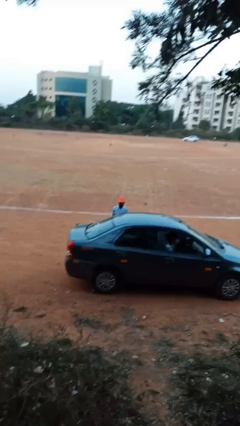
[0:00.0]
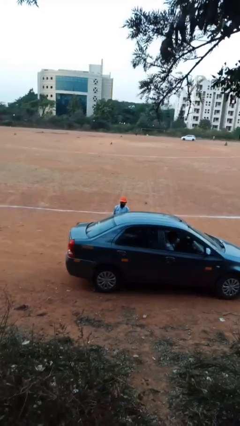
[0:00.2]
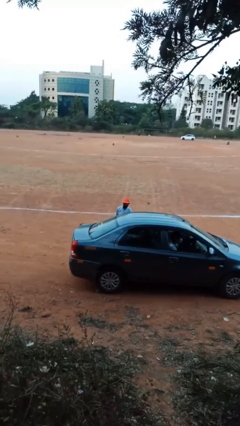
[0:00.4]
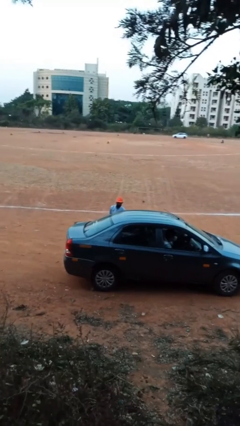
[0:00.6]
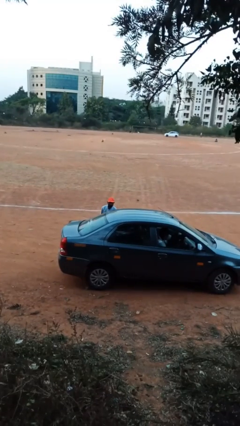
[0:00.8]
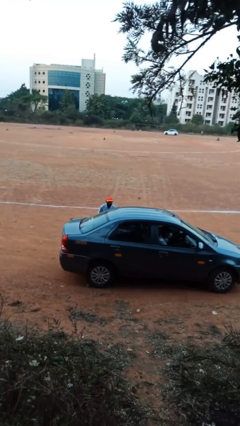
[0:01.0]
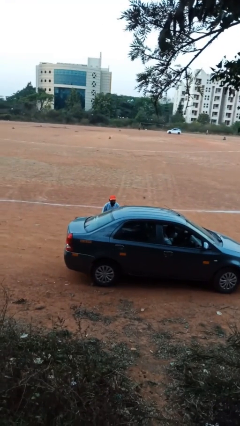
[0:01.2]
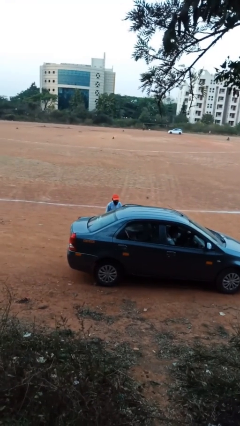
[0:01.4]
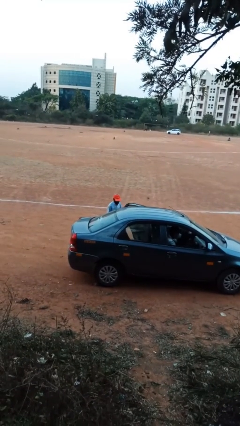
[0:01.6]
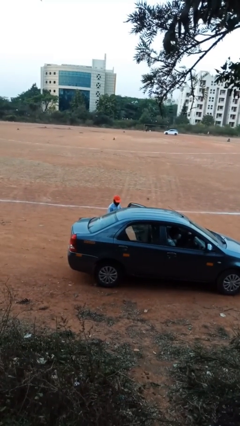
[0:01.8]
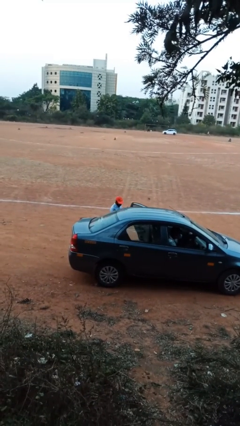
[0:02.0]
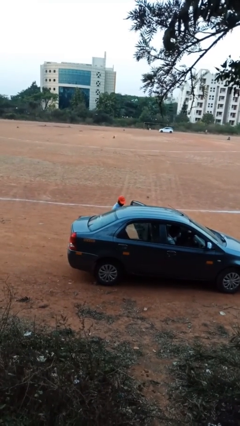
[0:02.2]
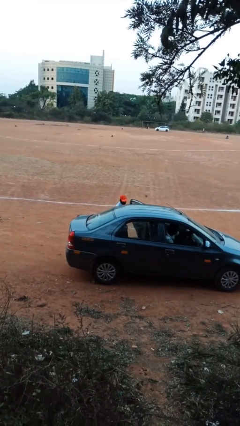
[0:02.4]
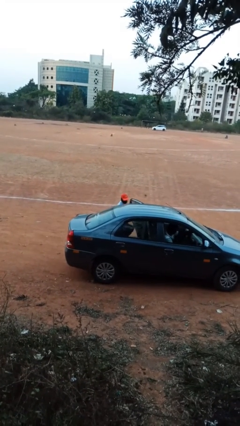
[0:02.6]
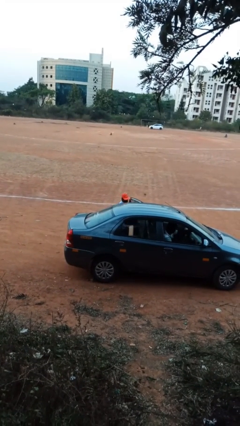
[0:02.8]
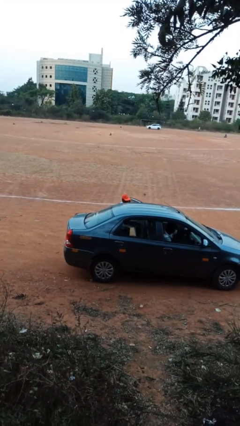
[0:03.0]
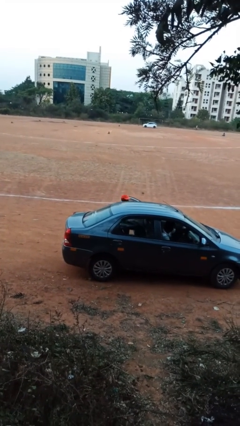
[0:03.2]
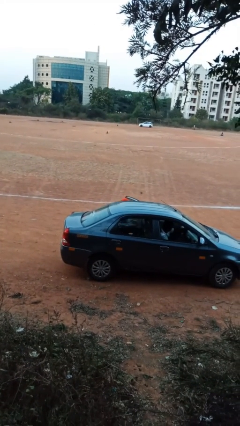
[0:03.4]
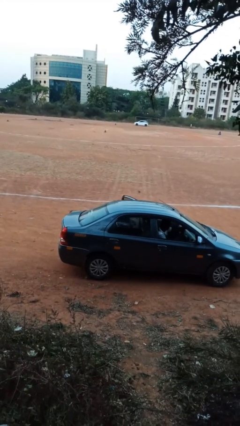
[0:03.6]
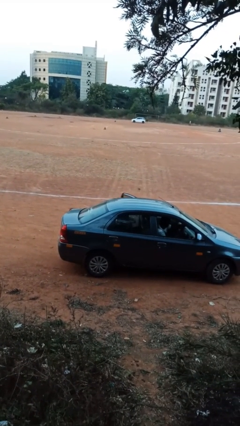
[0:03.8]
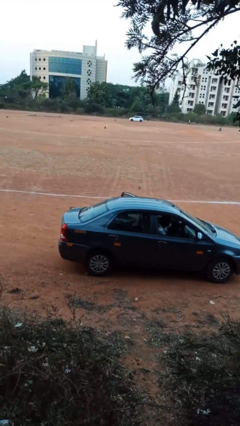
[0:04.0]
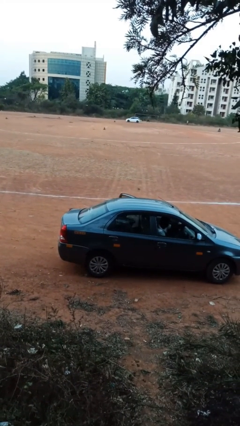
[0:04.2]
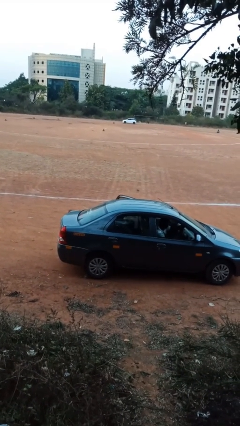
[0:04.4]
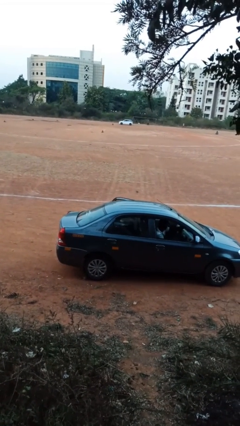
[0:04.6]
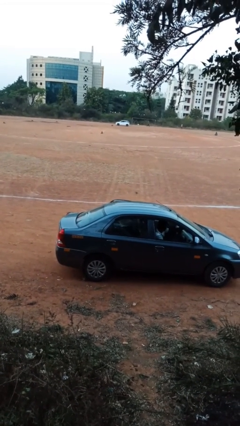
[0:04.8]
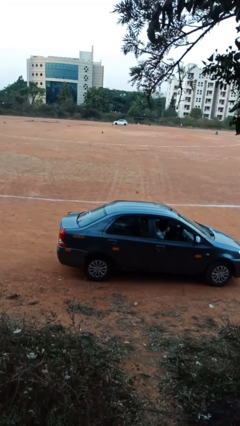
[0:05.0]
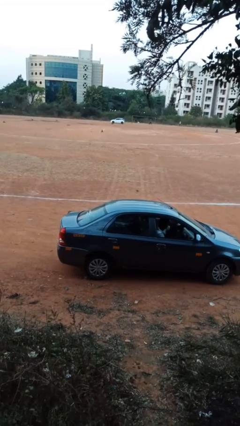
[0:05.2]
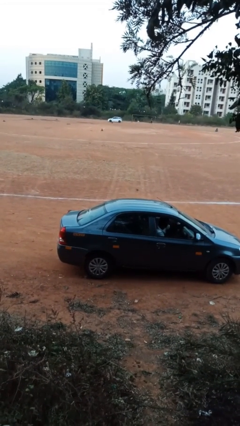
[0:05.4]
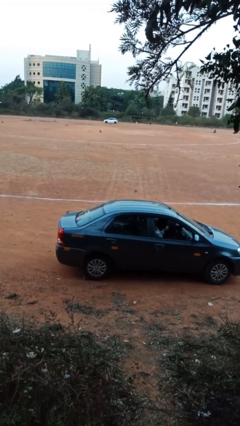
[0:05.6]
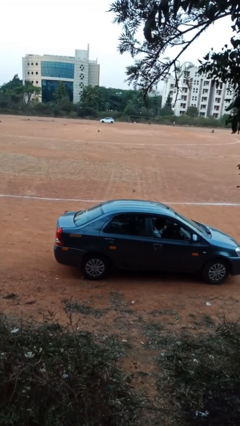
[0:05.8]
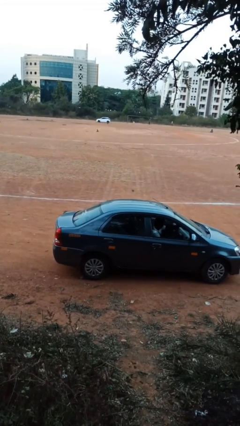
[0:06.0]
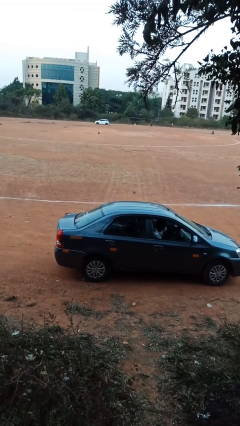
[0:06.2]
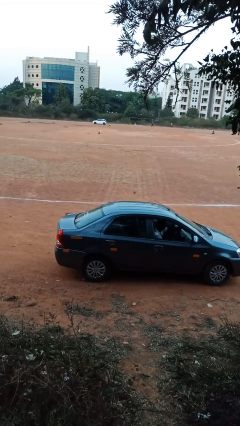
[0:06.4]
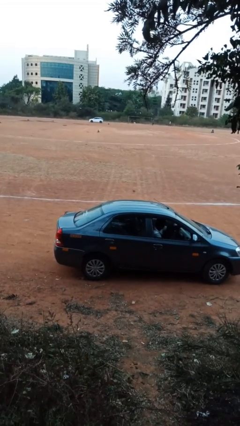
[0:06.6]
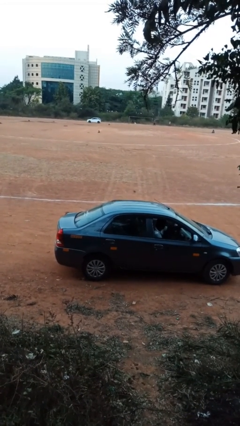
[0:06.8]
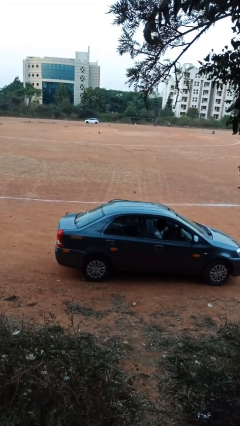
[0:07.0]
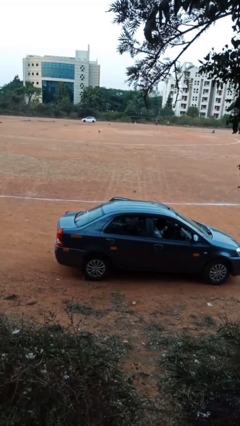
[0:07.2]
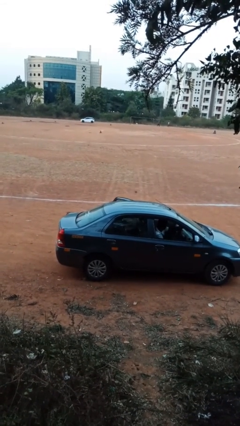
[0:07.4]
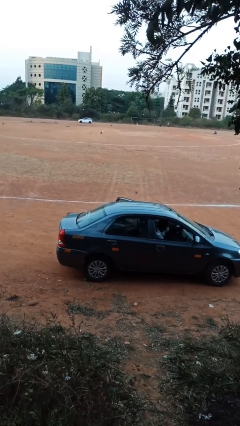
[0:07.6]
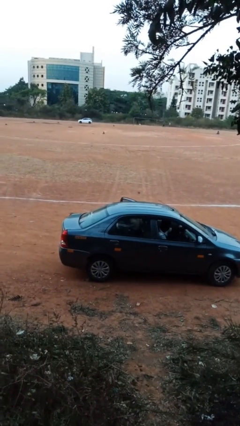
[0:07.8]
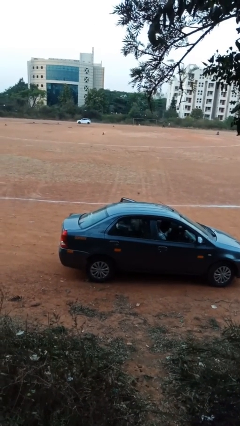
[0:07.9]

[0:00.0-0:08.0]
person enters car

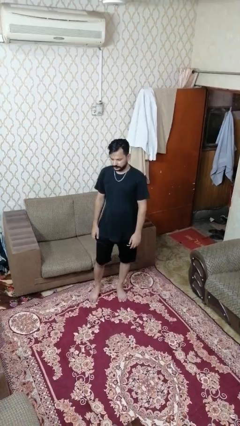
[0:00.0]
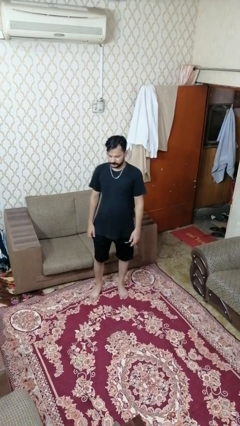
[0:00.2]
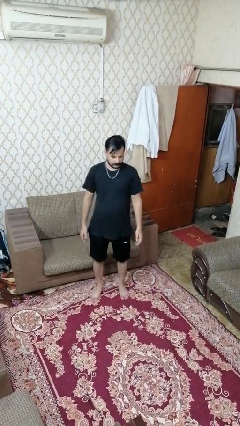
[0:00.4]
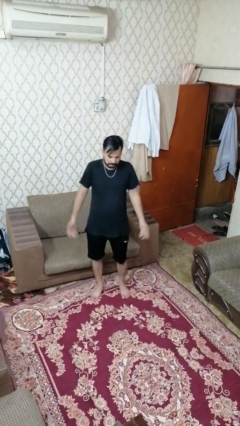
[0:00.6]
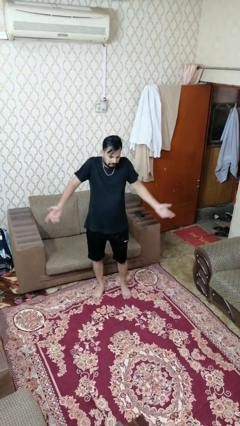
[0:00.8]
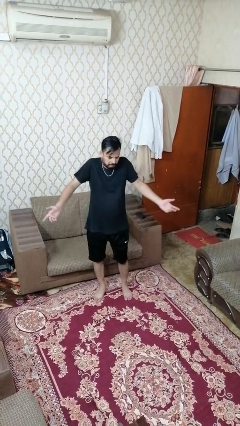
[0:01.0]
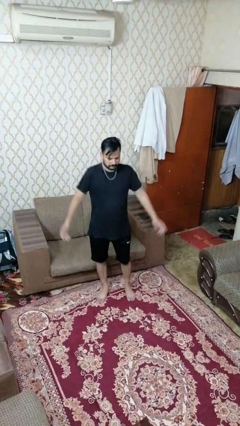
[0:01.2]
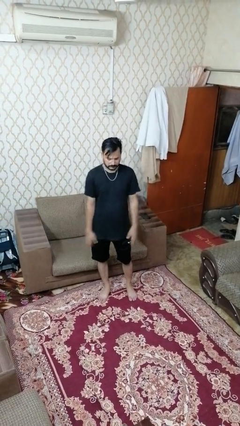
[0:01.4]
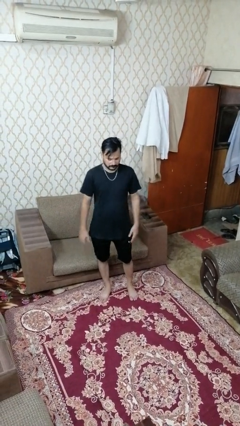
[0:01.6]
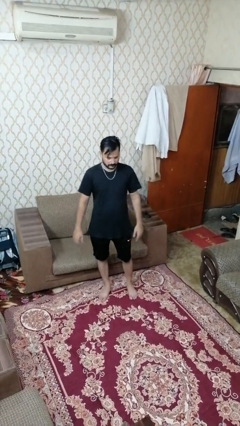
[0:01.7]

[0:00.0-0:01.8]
person shrugs

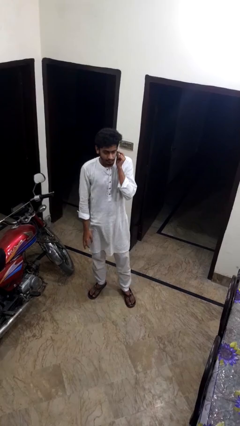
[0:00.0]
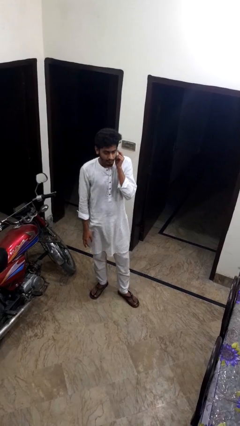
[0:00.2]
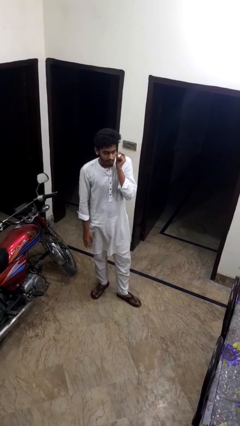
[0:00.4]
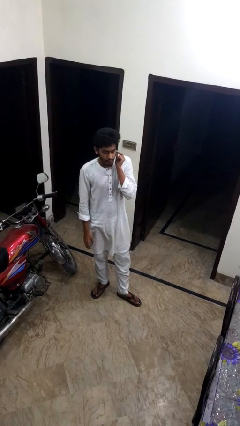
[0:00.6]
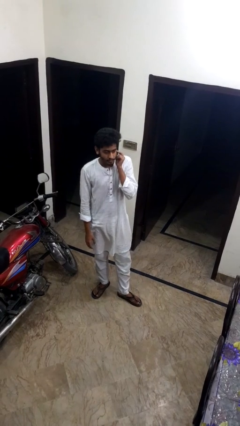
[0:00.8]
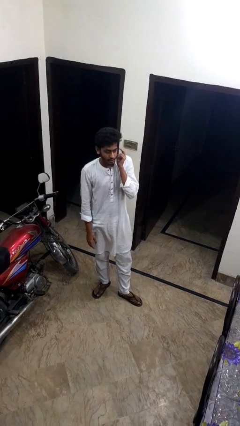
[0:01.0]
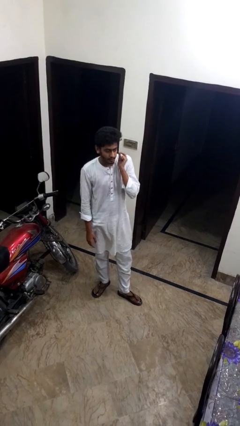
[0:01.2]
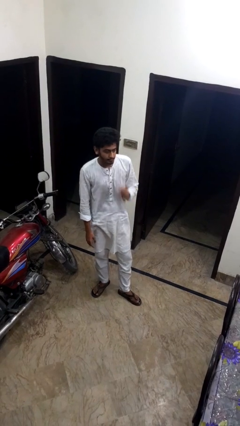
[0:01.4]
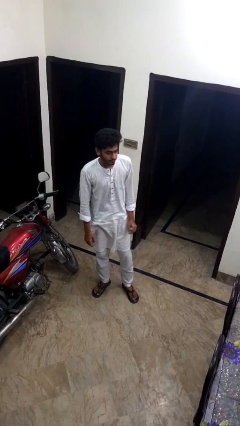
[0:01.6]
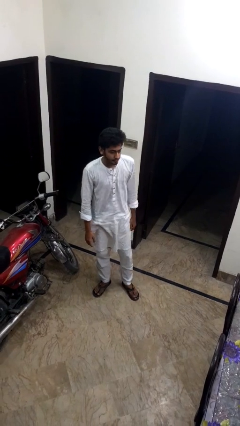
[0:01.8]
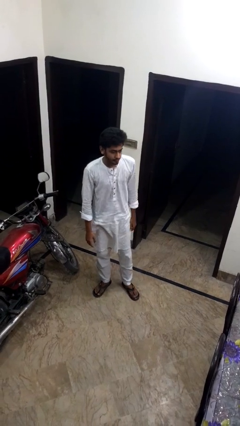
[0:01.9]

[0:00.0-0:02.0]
person touches earlobe

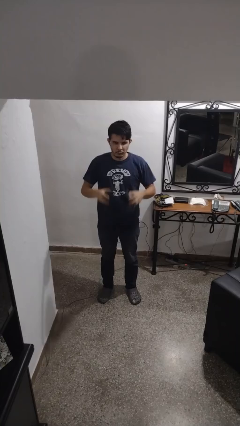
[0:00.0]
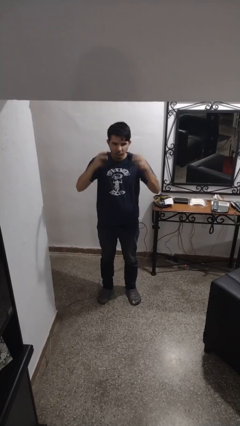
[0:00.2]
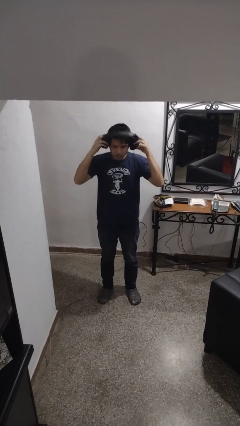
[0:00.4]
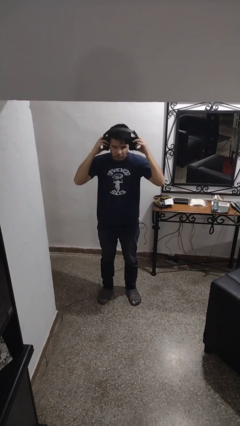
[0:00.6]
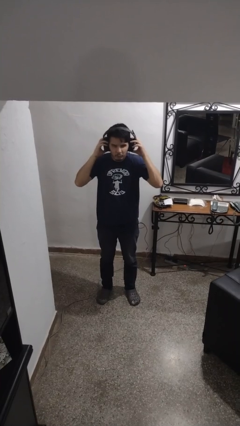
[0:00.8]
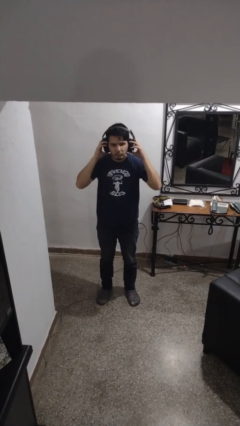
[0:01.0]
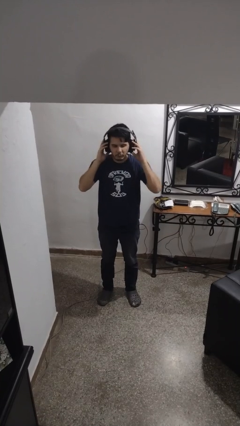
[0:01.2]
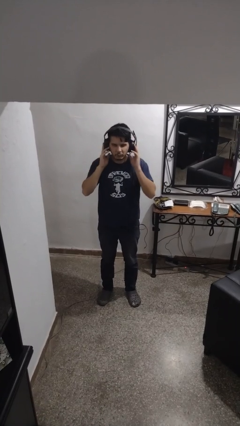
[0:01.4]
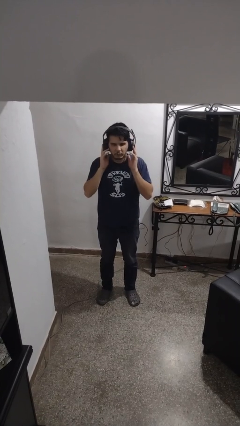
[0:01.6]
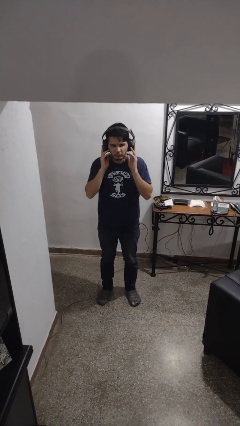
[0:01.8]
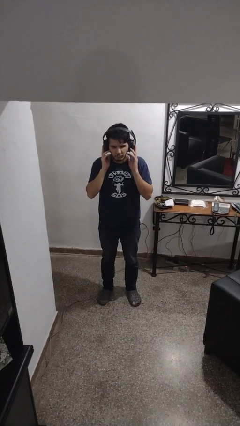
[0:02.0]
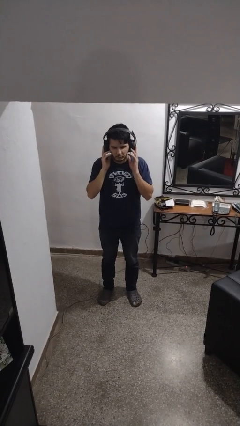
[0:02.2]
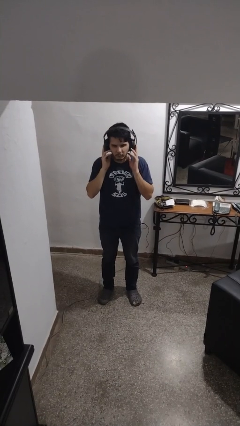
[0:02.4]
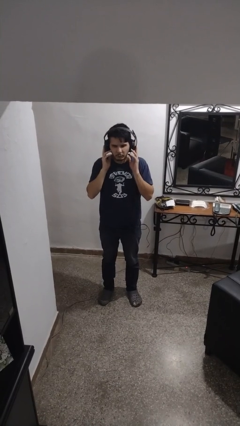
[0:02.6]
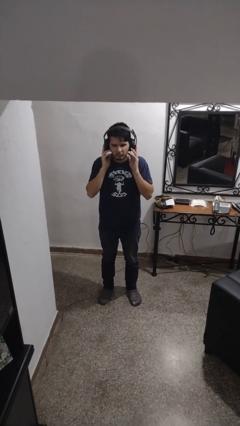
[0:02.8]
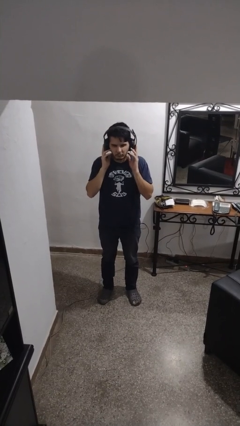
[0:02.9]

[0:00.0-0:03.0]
person puts on headphones

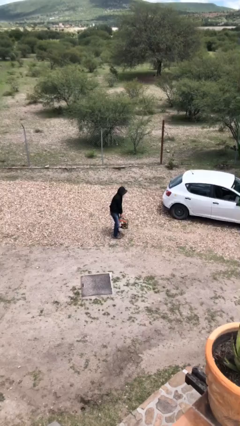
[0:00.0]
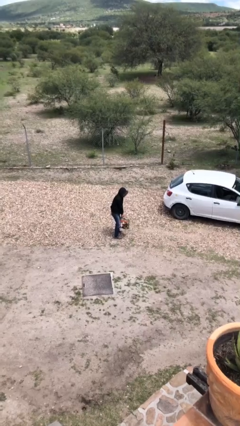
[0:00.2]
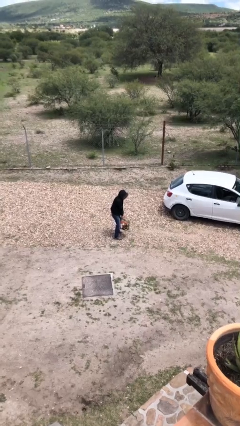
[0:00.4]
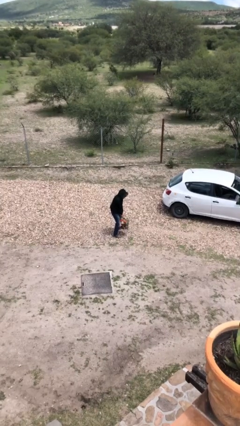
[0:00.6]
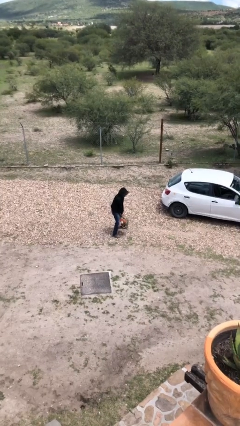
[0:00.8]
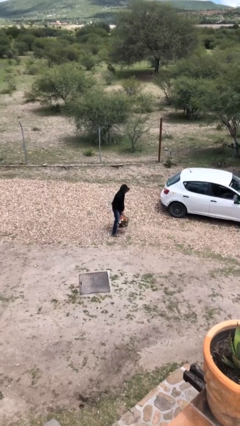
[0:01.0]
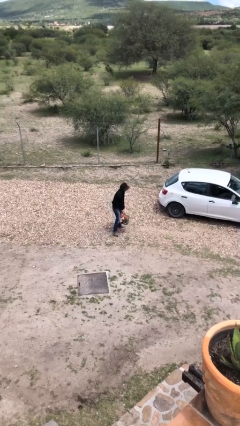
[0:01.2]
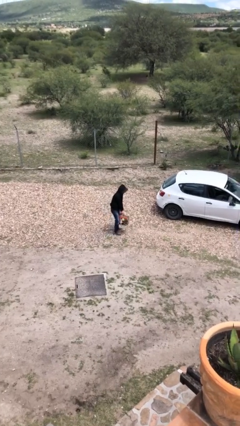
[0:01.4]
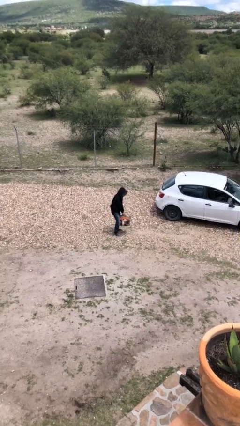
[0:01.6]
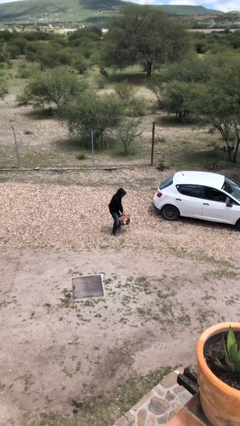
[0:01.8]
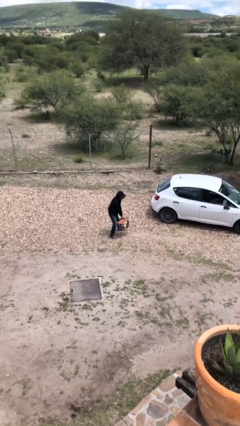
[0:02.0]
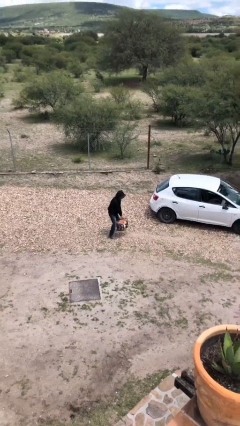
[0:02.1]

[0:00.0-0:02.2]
person carries heavy object

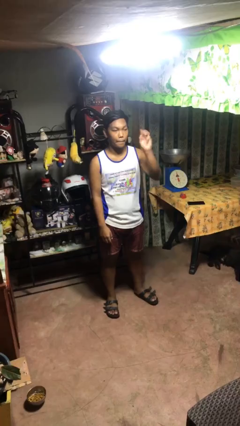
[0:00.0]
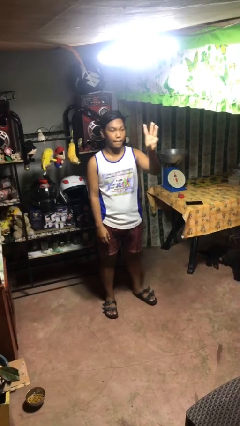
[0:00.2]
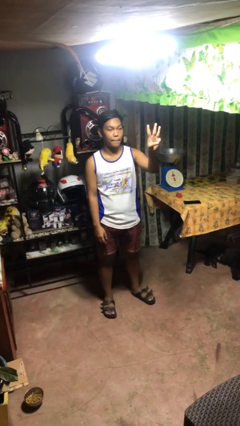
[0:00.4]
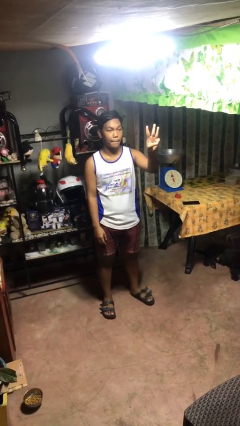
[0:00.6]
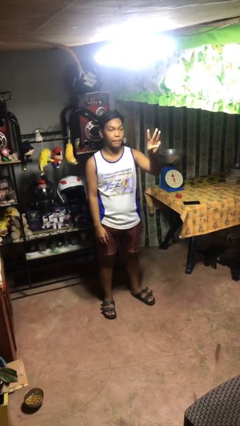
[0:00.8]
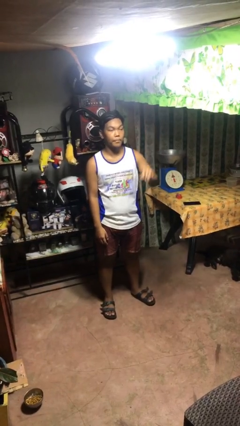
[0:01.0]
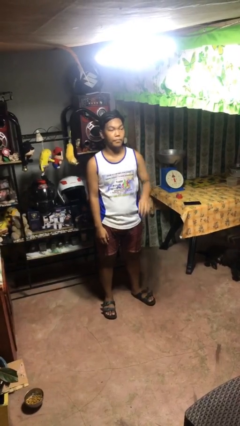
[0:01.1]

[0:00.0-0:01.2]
person gestures number three
